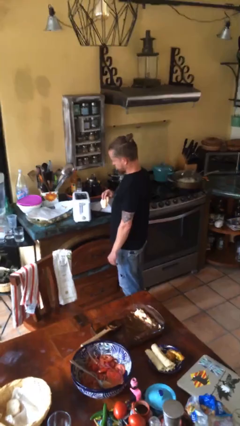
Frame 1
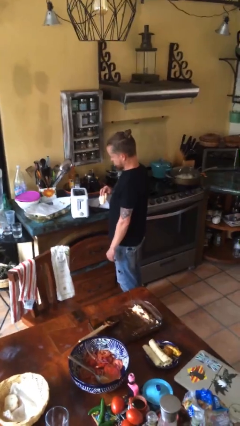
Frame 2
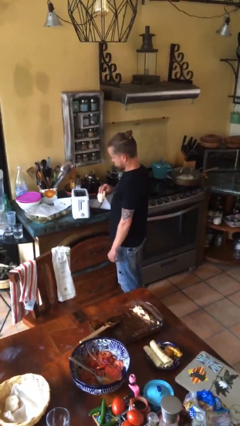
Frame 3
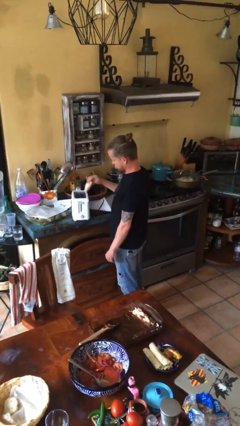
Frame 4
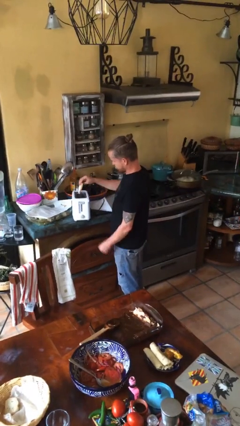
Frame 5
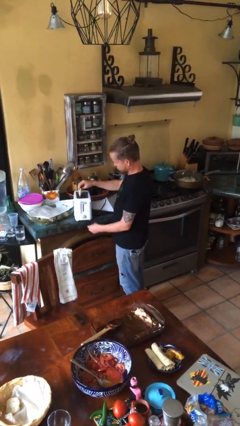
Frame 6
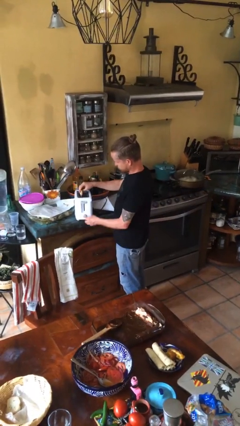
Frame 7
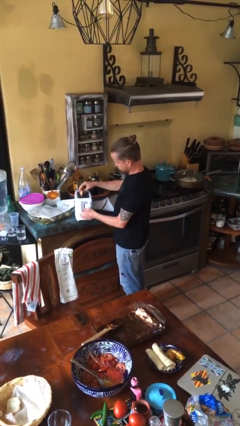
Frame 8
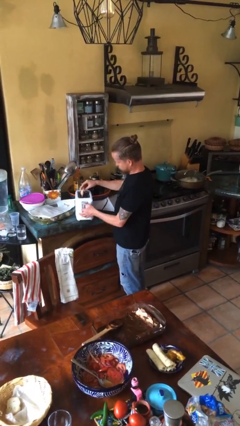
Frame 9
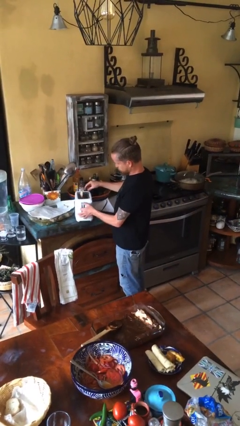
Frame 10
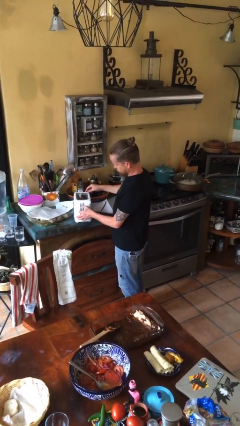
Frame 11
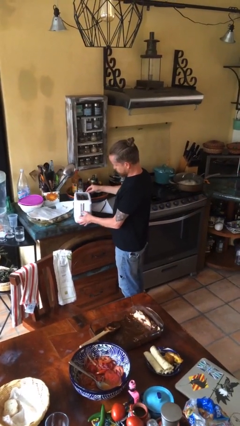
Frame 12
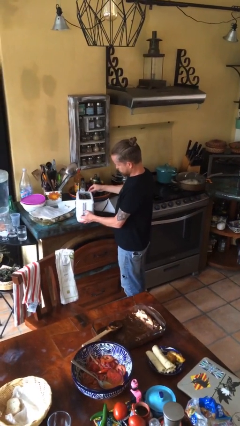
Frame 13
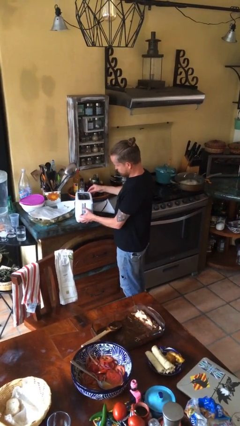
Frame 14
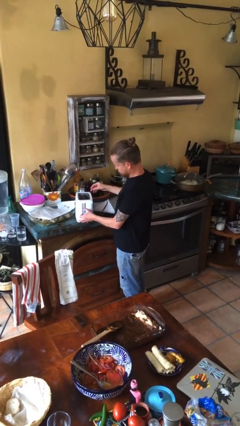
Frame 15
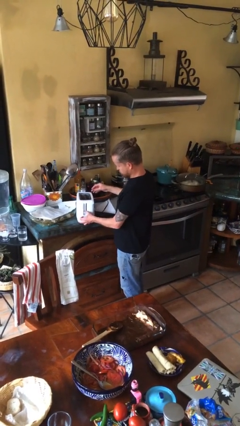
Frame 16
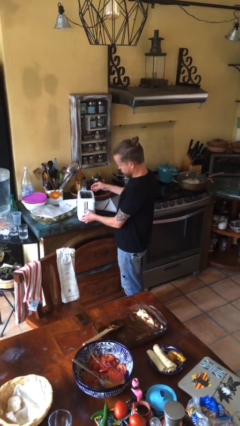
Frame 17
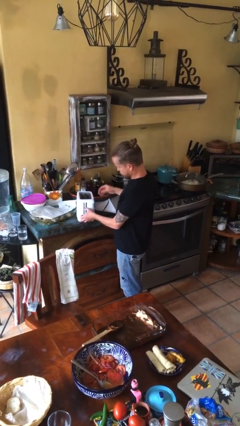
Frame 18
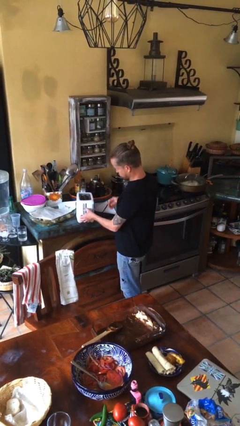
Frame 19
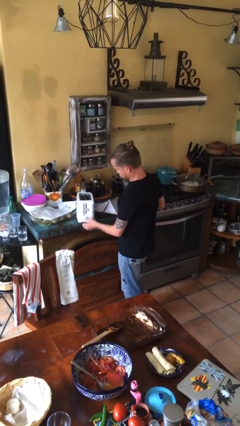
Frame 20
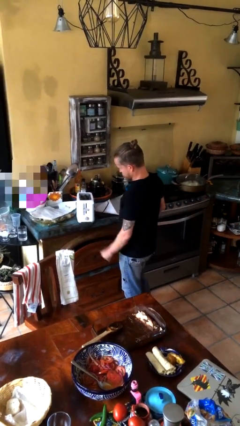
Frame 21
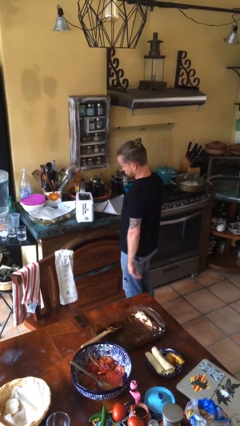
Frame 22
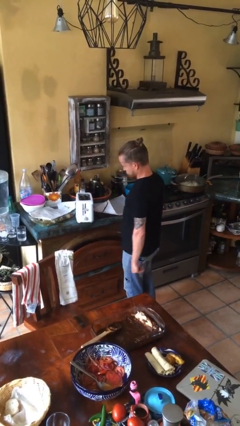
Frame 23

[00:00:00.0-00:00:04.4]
person puts object into toaster

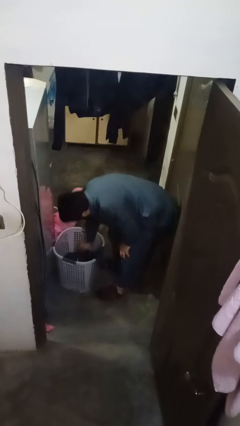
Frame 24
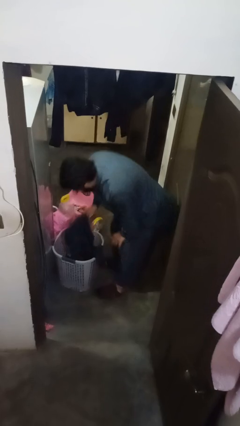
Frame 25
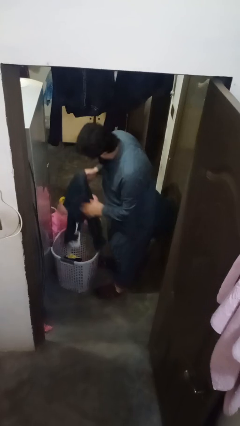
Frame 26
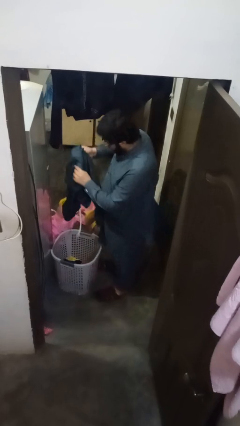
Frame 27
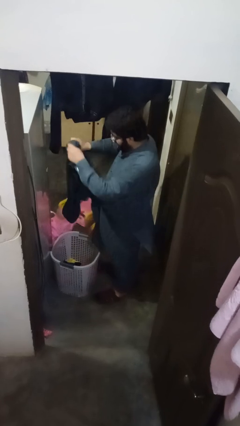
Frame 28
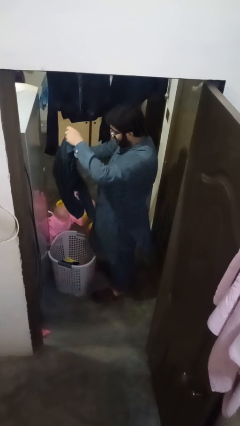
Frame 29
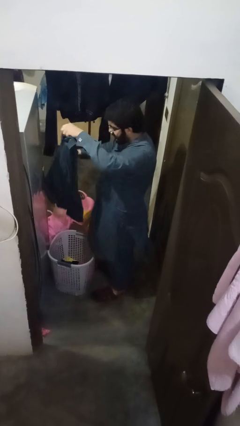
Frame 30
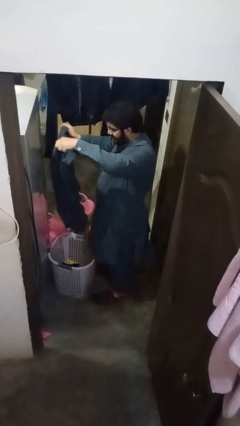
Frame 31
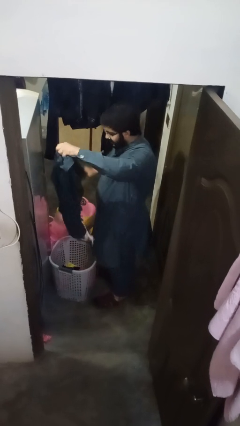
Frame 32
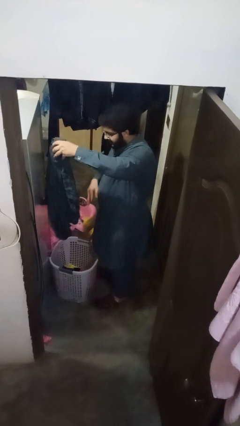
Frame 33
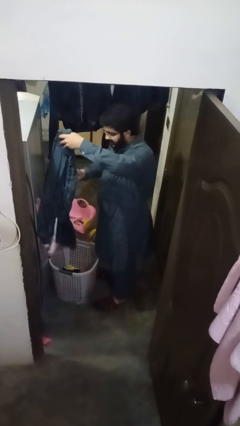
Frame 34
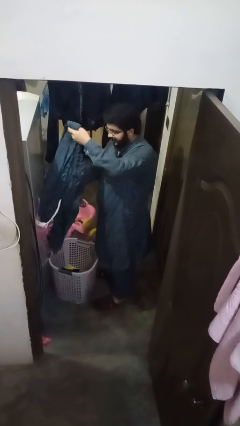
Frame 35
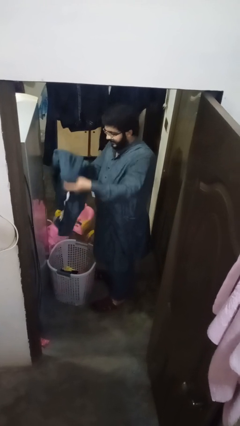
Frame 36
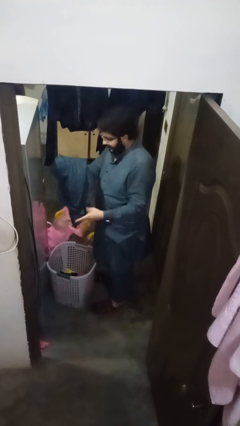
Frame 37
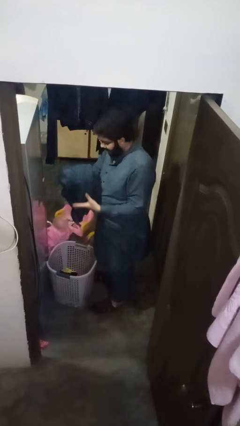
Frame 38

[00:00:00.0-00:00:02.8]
person folds pants

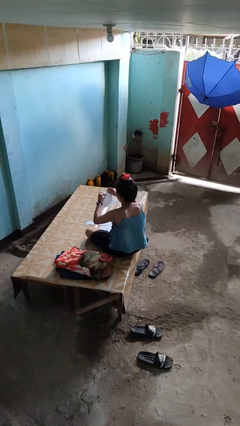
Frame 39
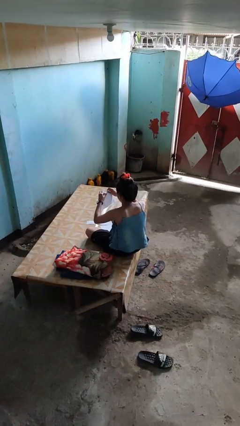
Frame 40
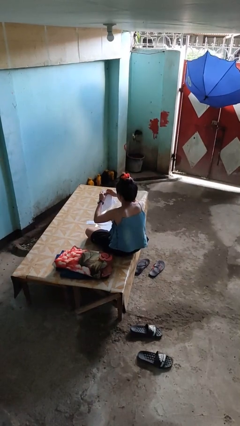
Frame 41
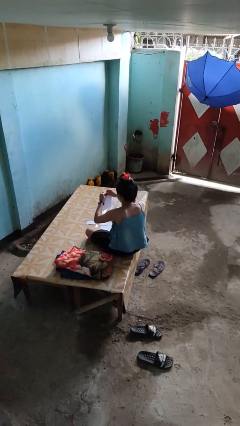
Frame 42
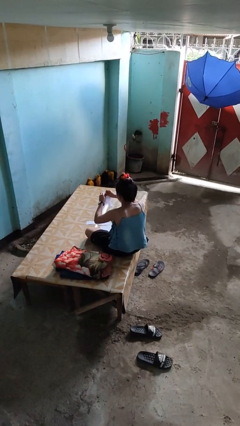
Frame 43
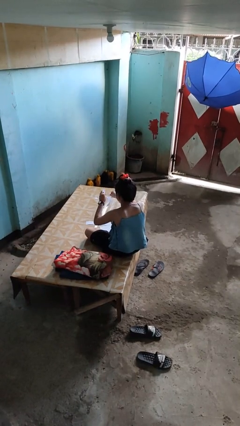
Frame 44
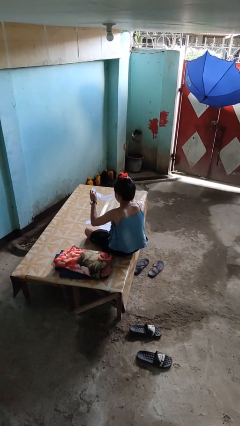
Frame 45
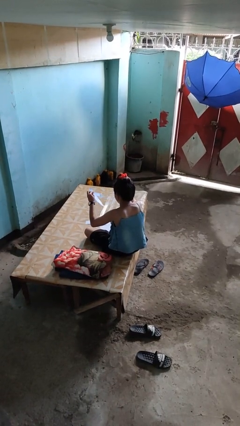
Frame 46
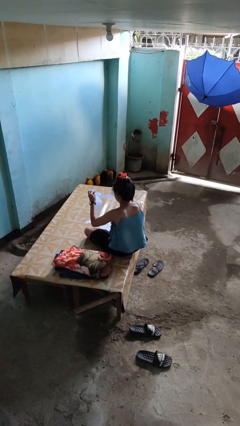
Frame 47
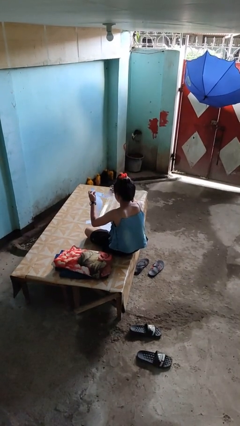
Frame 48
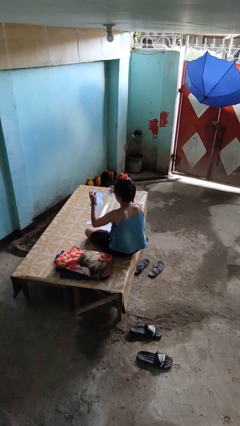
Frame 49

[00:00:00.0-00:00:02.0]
person tears paper

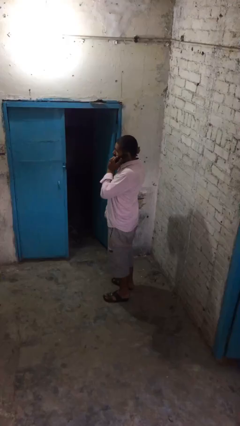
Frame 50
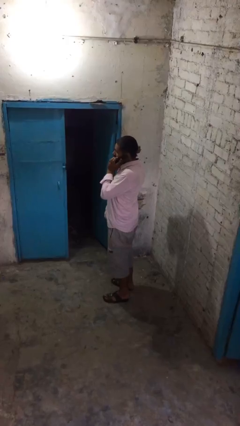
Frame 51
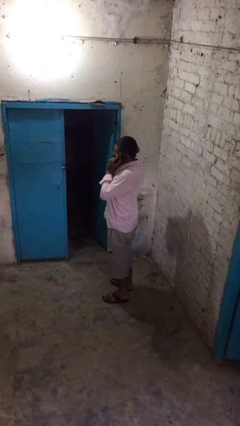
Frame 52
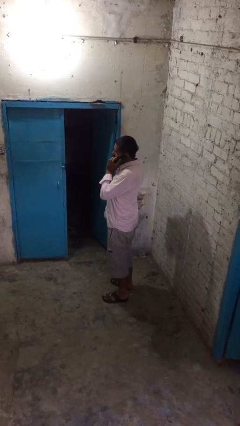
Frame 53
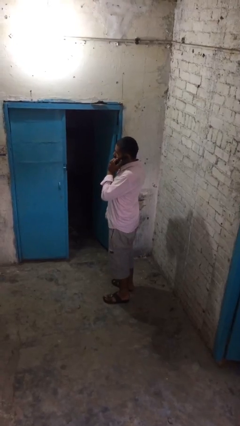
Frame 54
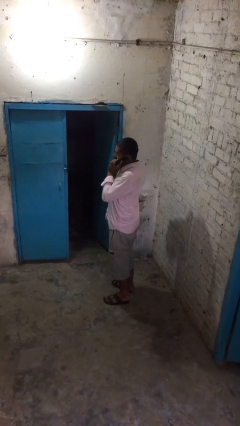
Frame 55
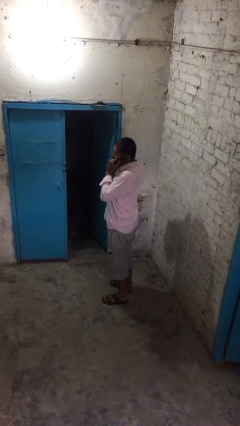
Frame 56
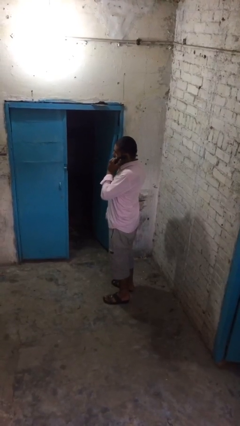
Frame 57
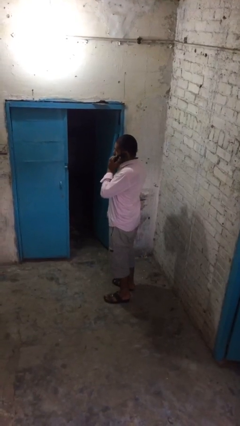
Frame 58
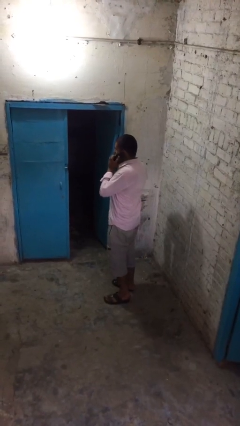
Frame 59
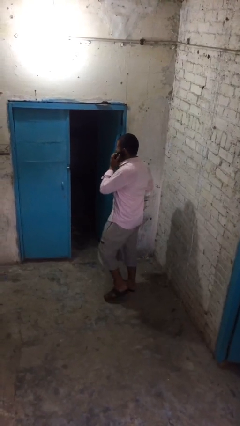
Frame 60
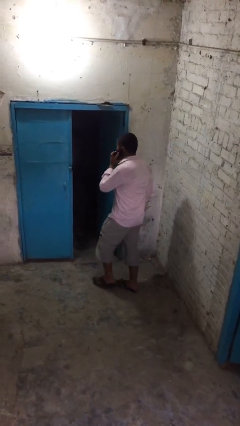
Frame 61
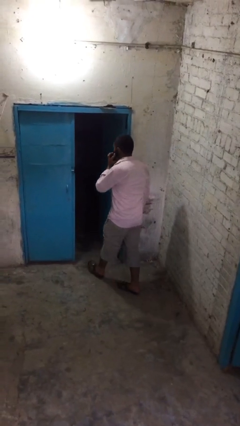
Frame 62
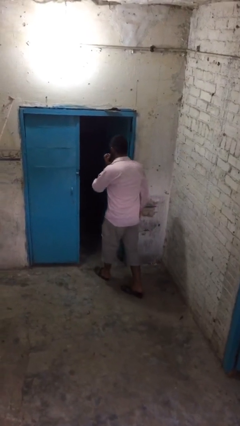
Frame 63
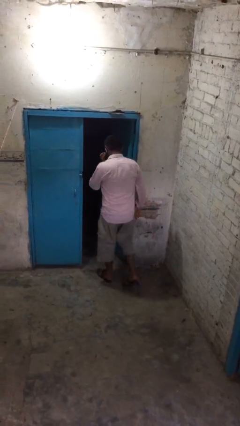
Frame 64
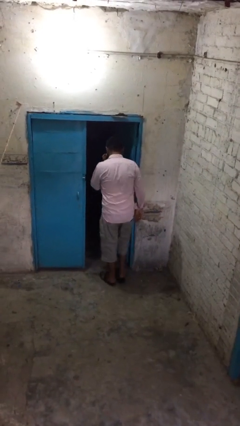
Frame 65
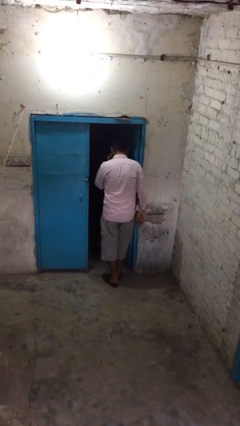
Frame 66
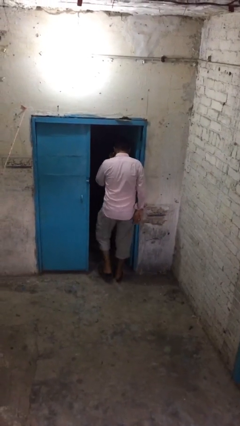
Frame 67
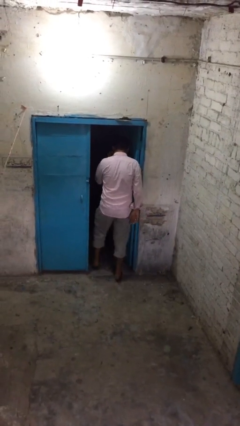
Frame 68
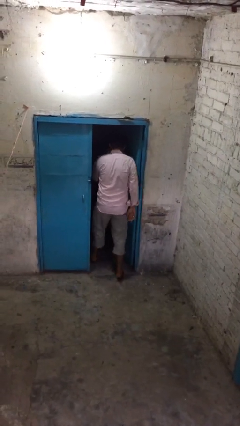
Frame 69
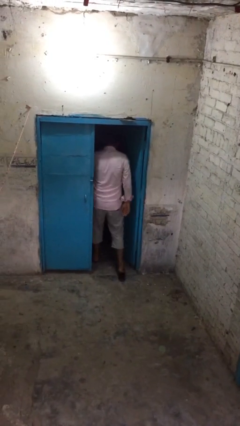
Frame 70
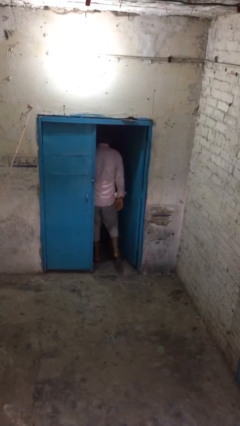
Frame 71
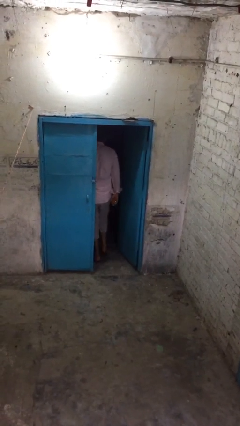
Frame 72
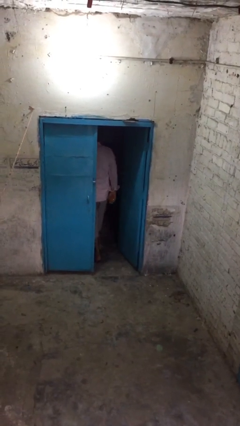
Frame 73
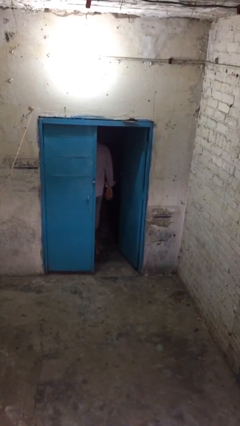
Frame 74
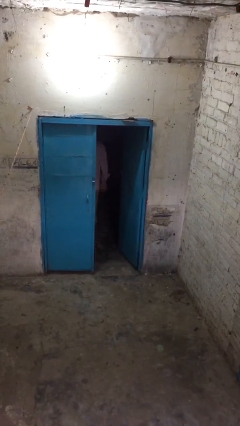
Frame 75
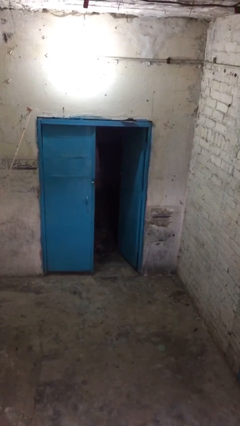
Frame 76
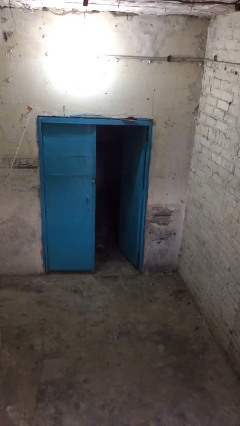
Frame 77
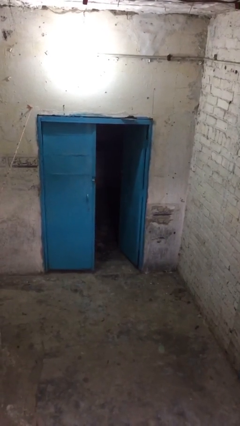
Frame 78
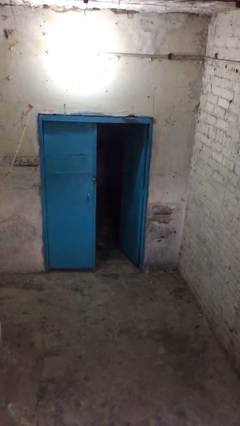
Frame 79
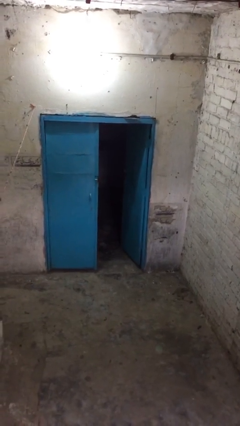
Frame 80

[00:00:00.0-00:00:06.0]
person exits scene through structure

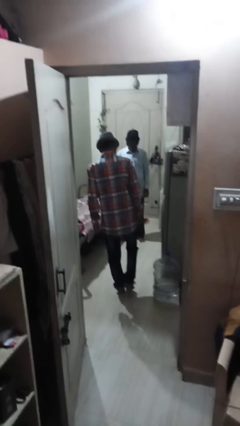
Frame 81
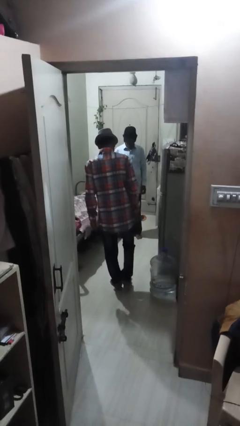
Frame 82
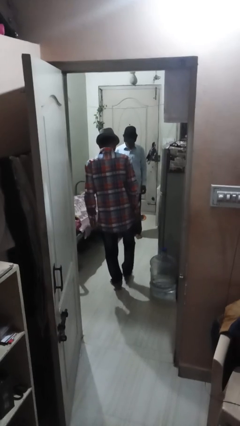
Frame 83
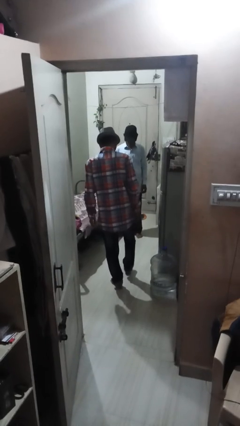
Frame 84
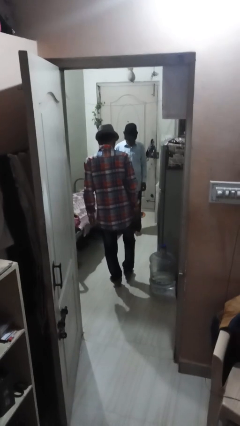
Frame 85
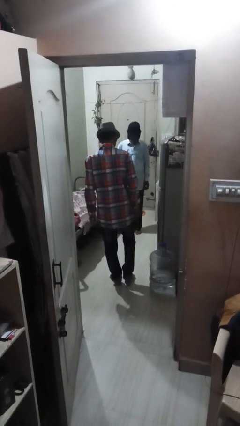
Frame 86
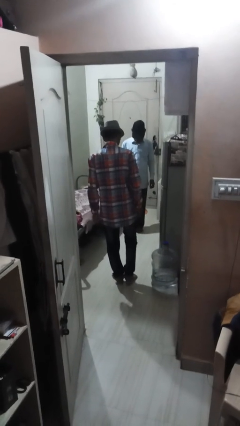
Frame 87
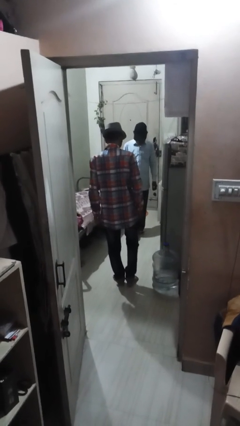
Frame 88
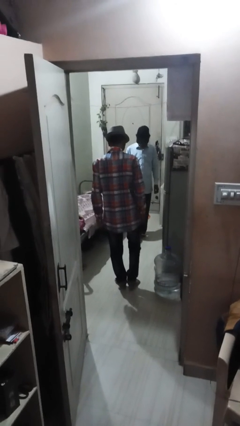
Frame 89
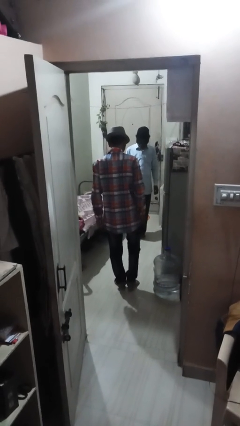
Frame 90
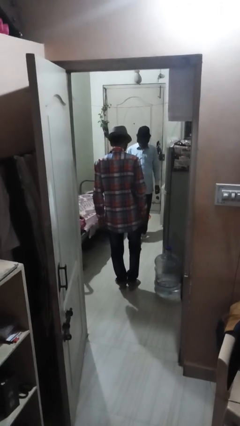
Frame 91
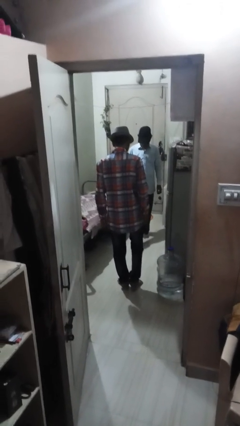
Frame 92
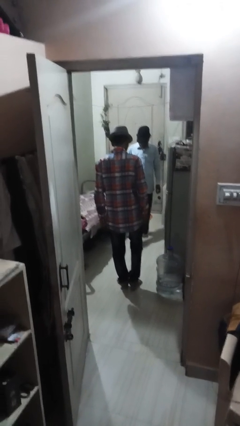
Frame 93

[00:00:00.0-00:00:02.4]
person kicks object to person
